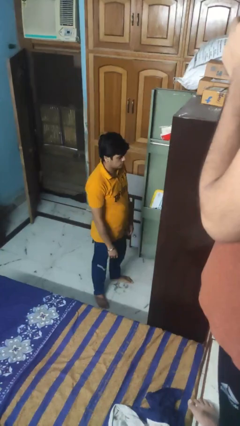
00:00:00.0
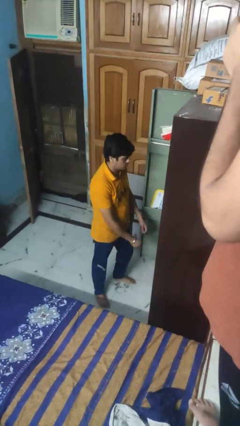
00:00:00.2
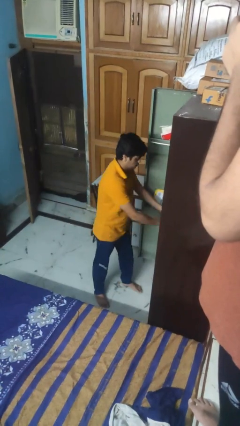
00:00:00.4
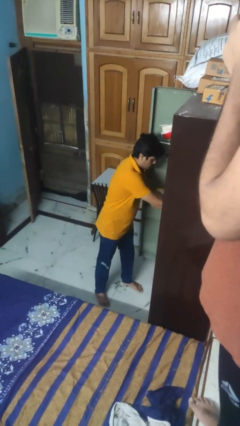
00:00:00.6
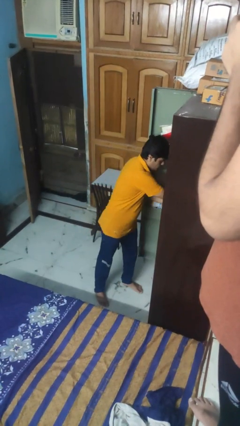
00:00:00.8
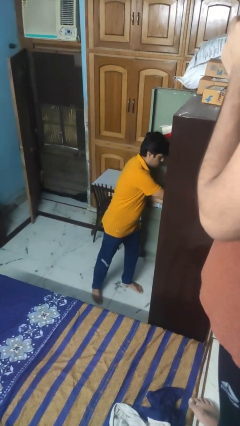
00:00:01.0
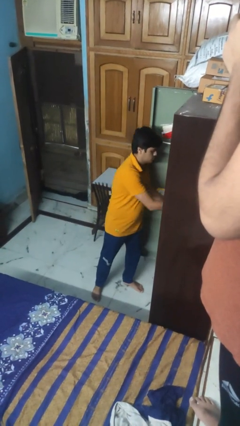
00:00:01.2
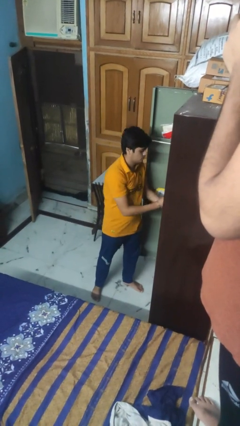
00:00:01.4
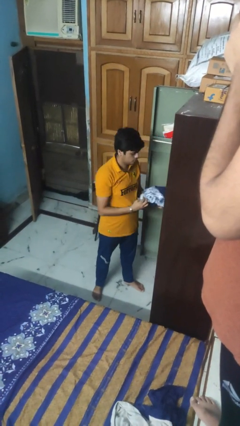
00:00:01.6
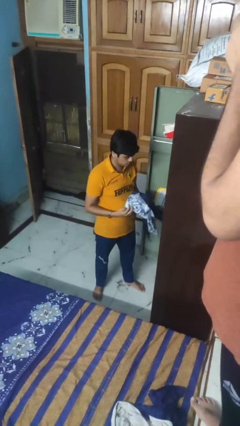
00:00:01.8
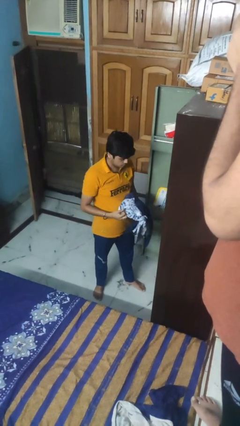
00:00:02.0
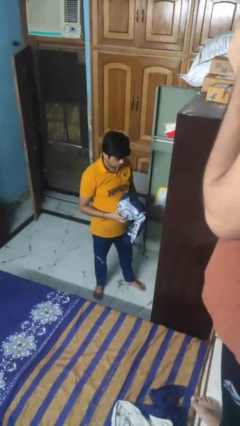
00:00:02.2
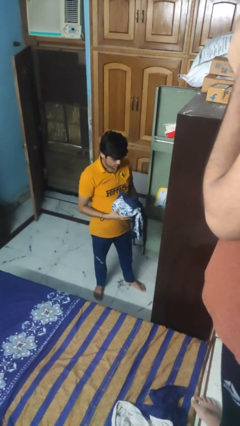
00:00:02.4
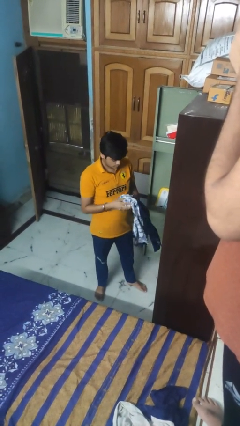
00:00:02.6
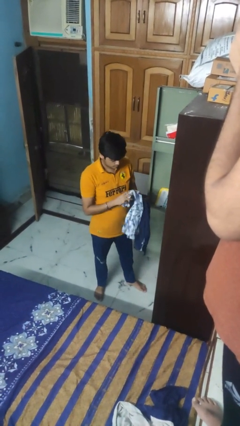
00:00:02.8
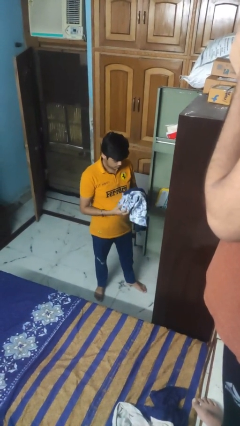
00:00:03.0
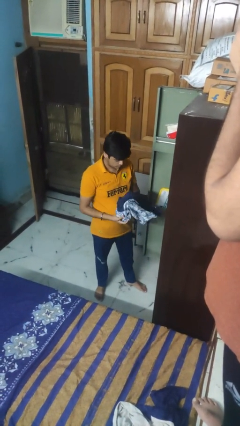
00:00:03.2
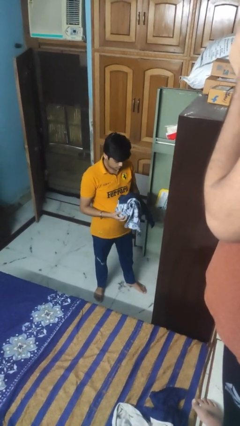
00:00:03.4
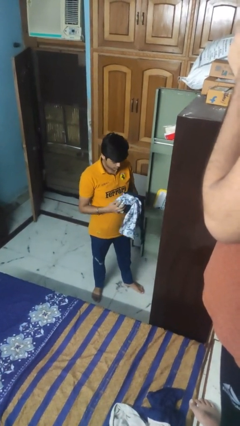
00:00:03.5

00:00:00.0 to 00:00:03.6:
person takes clothes from dresser

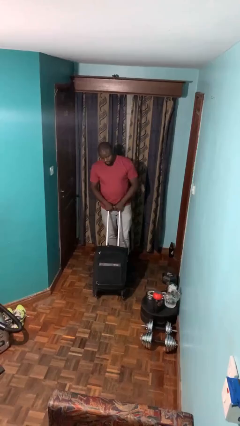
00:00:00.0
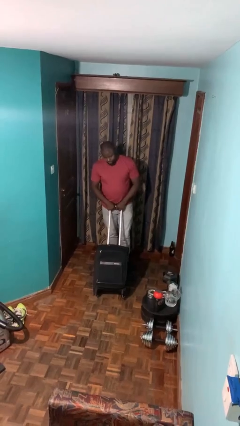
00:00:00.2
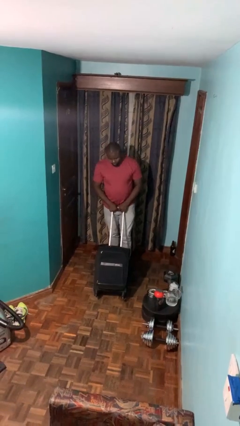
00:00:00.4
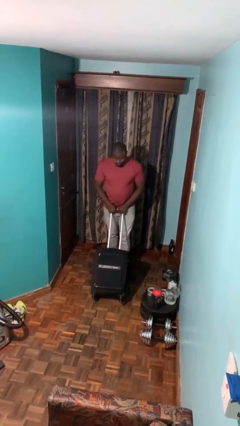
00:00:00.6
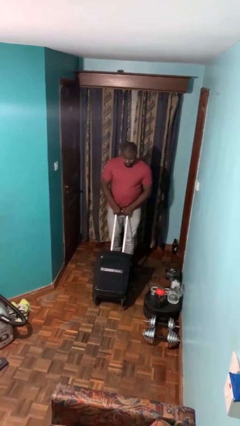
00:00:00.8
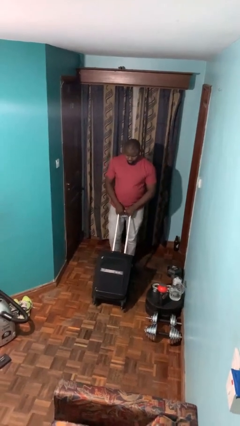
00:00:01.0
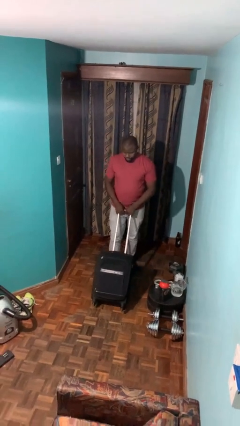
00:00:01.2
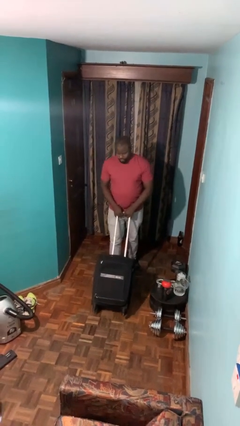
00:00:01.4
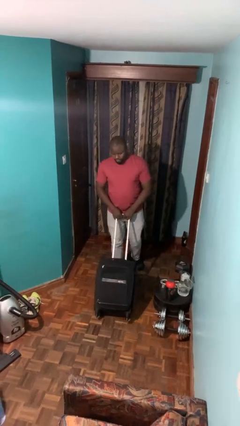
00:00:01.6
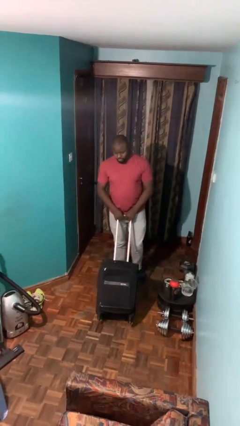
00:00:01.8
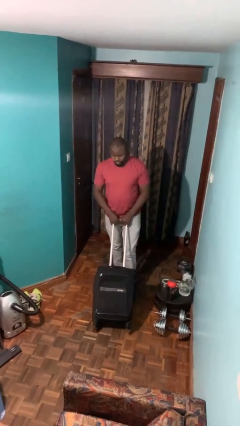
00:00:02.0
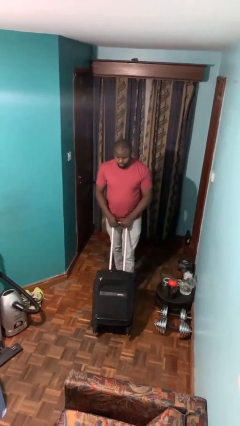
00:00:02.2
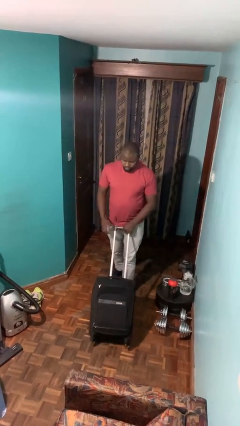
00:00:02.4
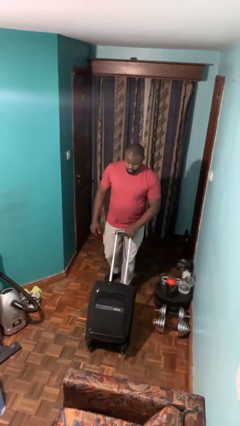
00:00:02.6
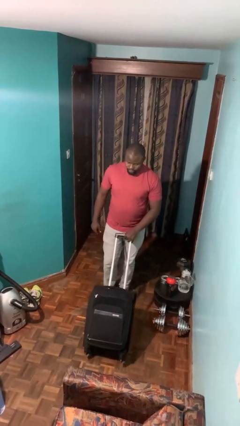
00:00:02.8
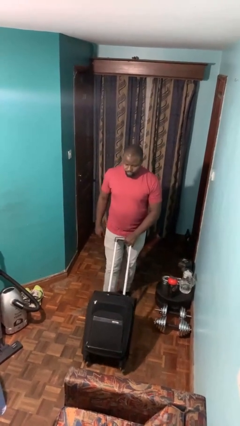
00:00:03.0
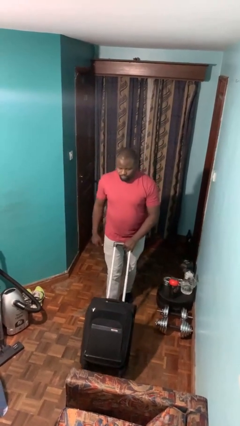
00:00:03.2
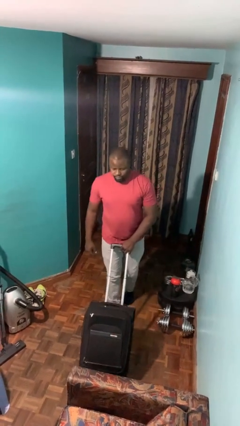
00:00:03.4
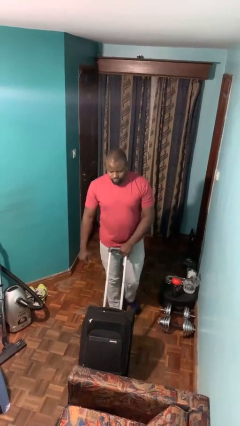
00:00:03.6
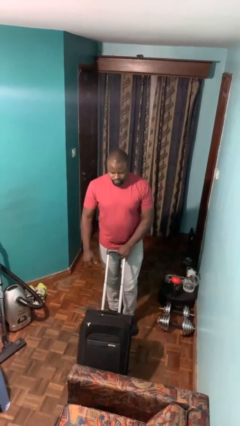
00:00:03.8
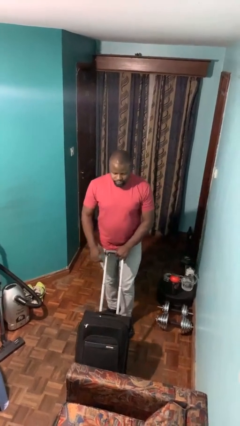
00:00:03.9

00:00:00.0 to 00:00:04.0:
person pushes wheeled cart

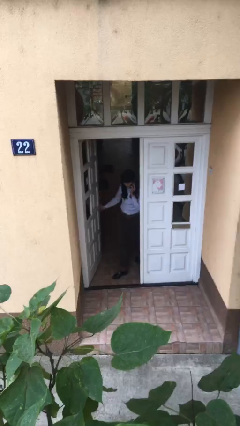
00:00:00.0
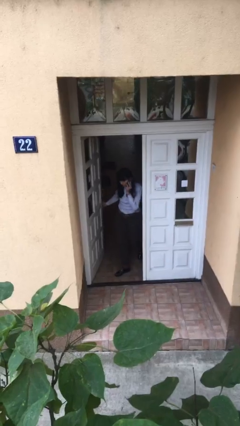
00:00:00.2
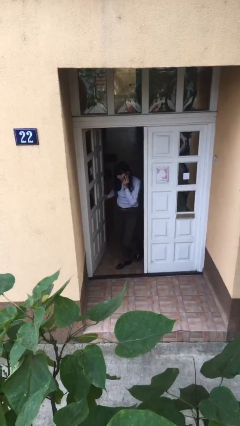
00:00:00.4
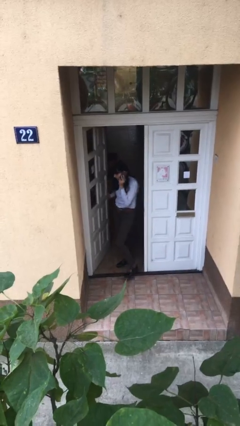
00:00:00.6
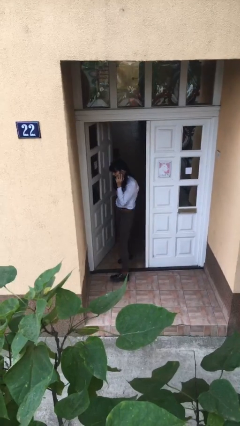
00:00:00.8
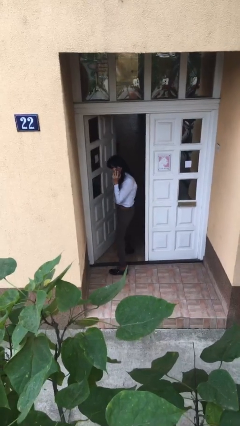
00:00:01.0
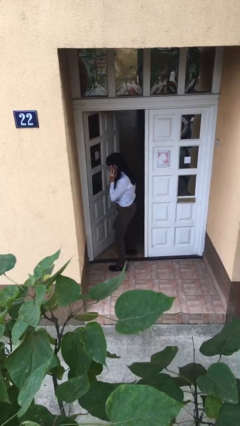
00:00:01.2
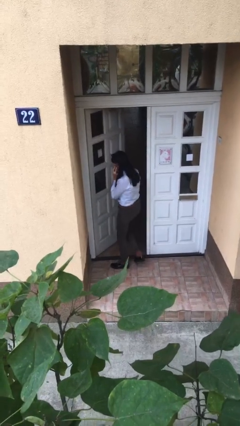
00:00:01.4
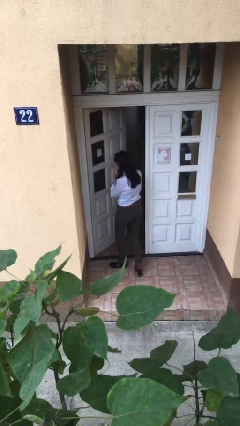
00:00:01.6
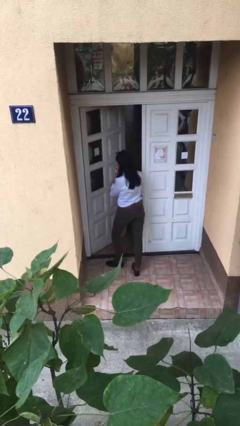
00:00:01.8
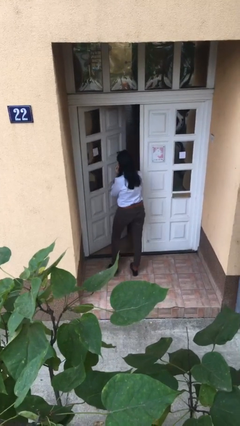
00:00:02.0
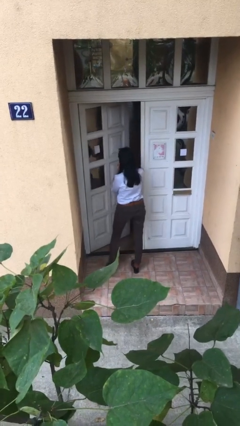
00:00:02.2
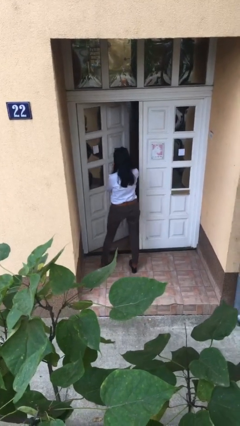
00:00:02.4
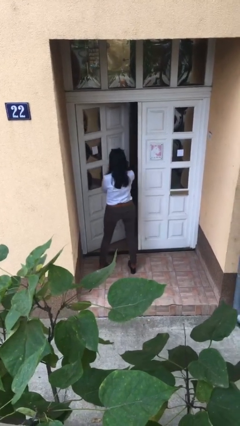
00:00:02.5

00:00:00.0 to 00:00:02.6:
person enters scene through structure

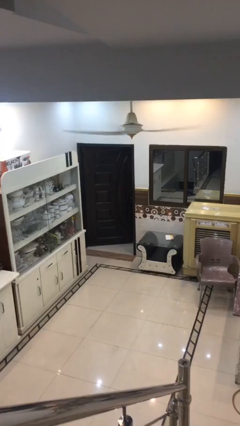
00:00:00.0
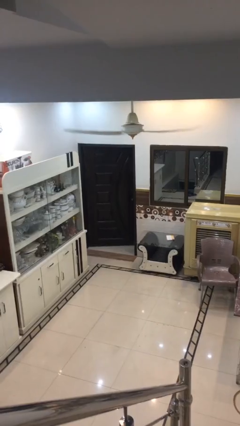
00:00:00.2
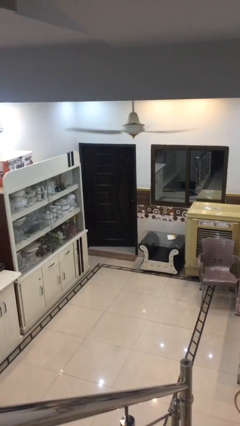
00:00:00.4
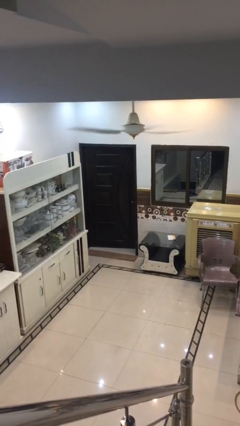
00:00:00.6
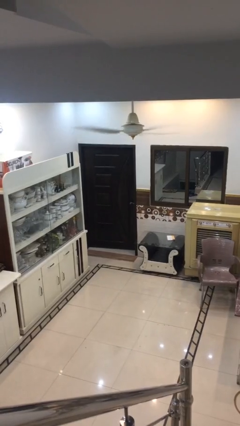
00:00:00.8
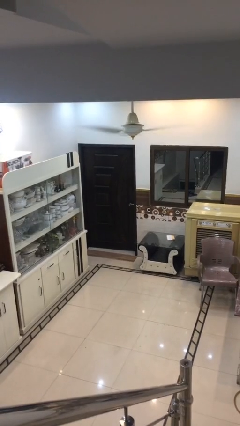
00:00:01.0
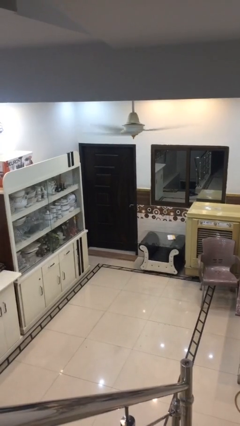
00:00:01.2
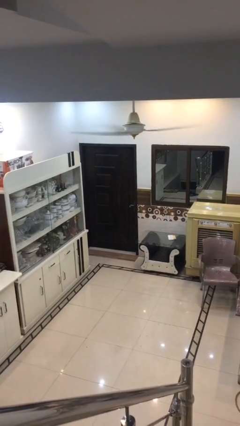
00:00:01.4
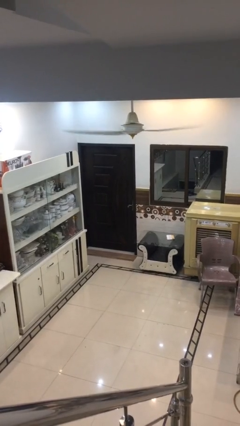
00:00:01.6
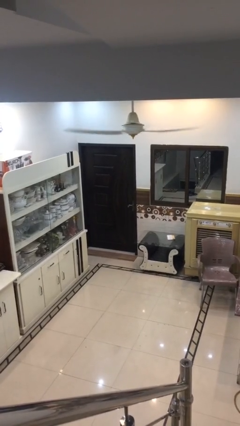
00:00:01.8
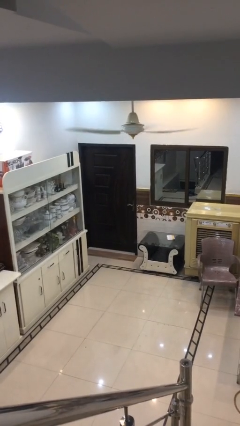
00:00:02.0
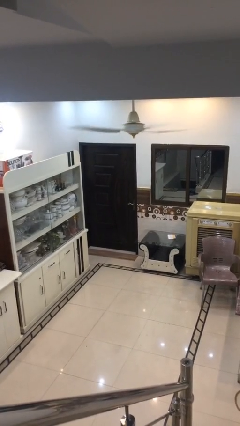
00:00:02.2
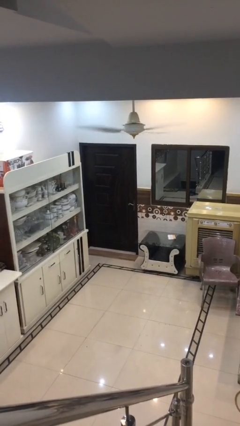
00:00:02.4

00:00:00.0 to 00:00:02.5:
person closes facility door

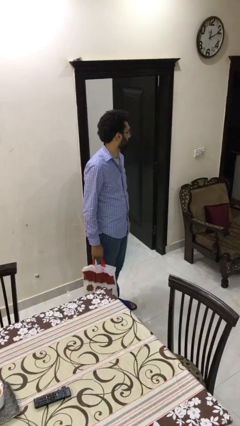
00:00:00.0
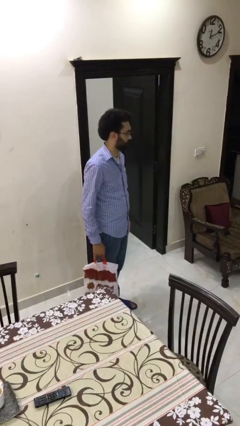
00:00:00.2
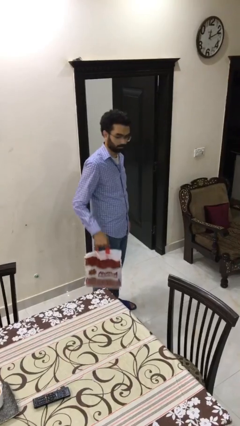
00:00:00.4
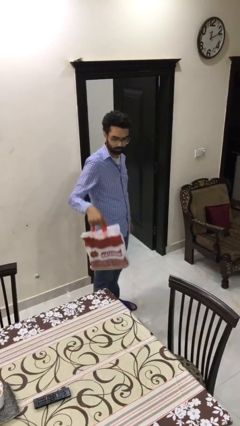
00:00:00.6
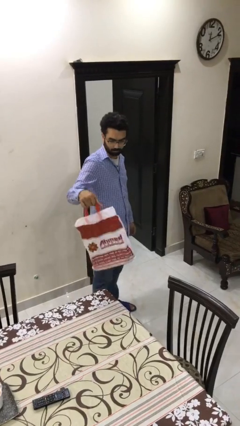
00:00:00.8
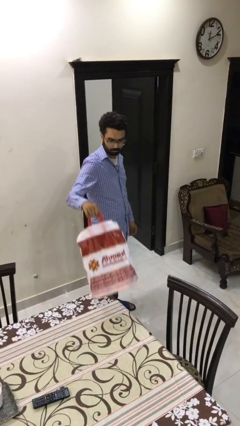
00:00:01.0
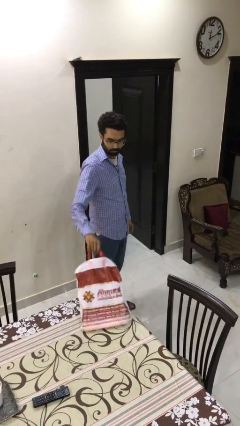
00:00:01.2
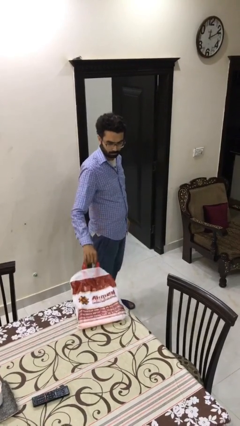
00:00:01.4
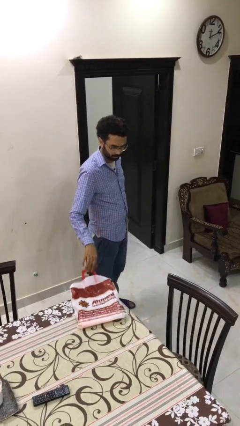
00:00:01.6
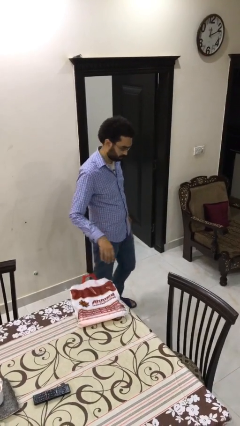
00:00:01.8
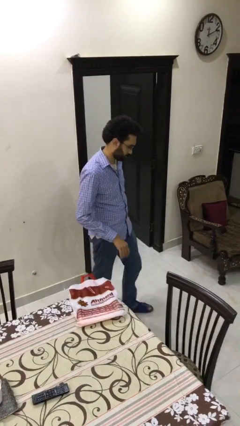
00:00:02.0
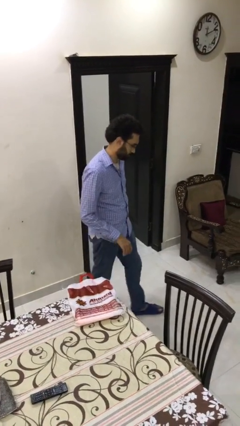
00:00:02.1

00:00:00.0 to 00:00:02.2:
person puts down object on table

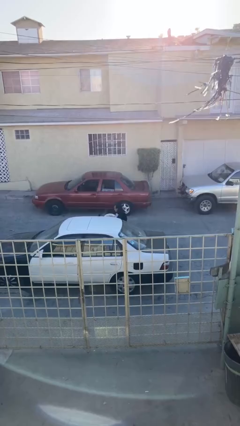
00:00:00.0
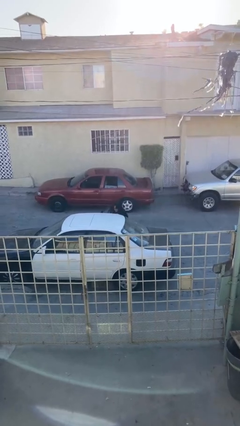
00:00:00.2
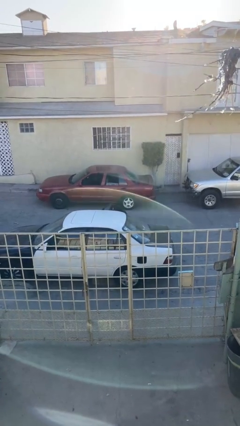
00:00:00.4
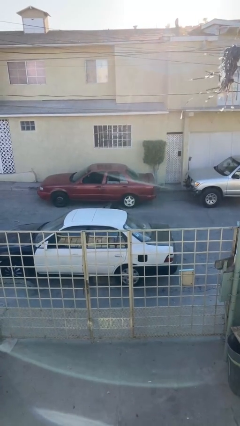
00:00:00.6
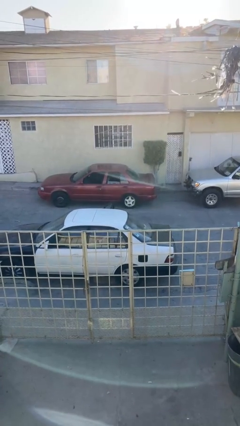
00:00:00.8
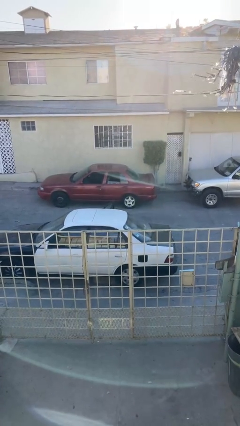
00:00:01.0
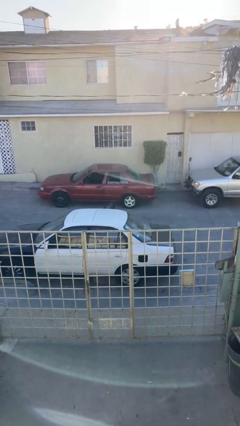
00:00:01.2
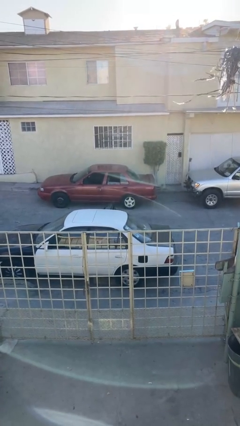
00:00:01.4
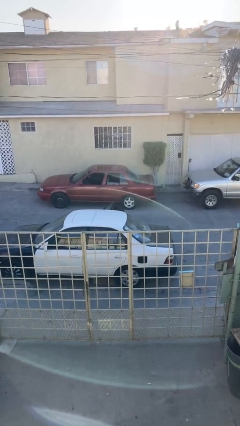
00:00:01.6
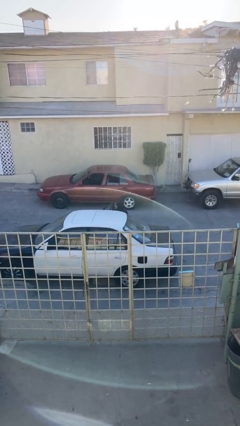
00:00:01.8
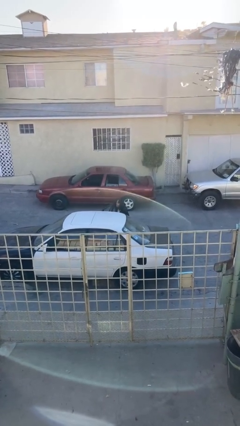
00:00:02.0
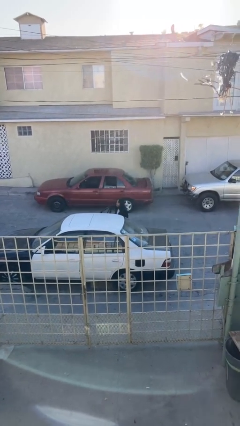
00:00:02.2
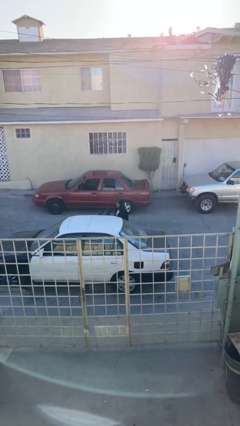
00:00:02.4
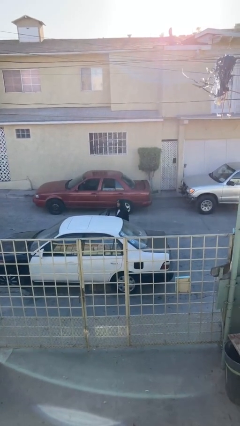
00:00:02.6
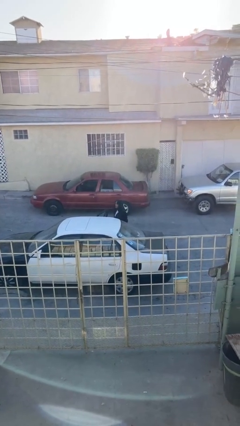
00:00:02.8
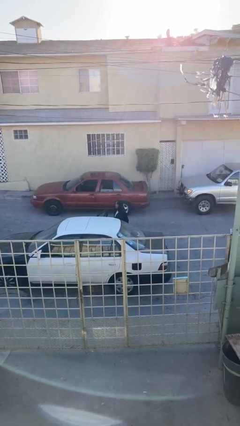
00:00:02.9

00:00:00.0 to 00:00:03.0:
person loads car
